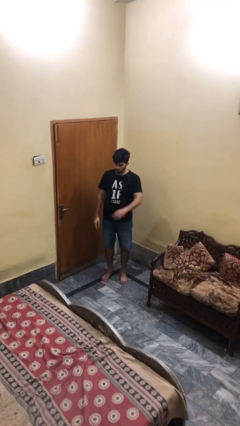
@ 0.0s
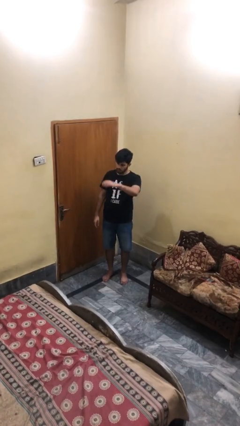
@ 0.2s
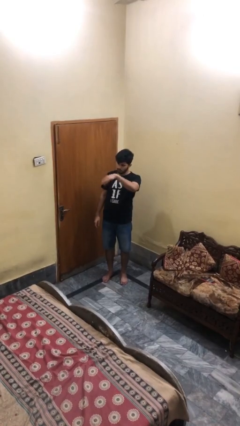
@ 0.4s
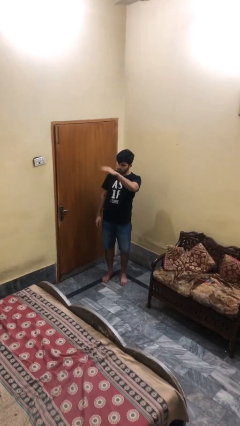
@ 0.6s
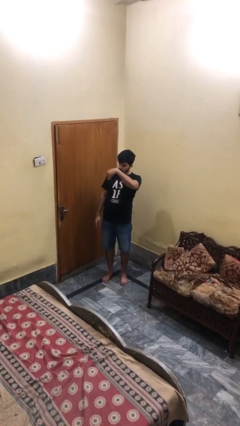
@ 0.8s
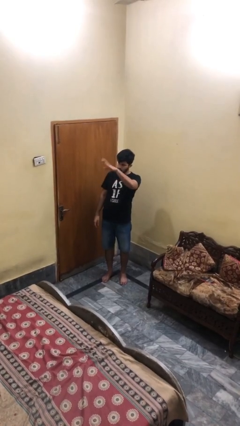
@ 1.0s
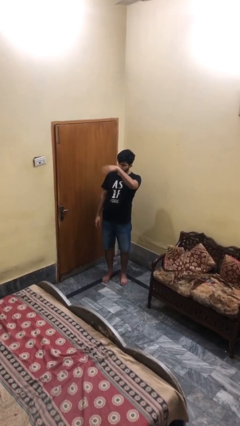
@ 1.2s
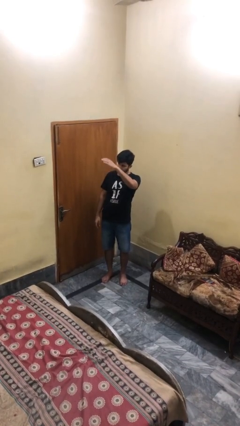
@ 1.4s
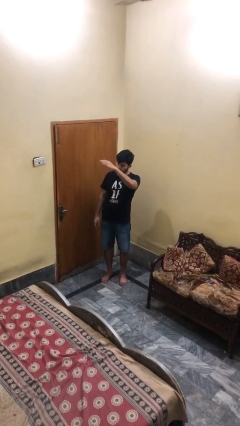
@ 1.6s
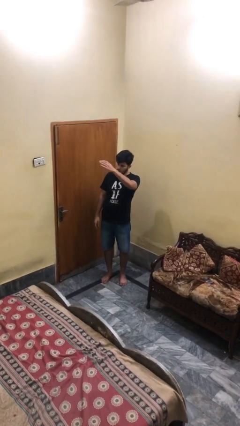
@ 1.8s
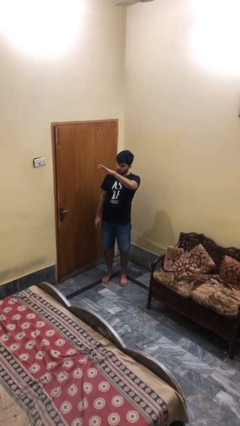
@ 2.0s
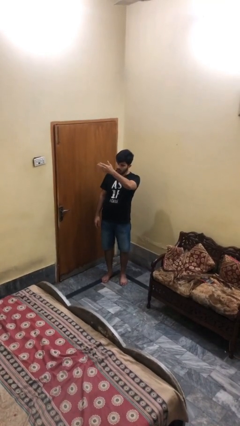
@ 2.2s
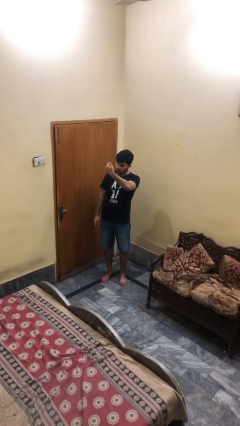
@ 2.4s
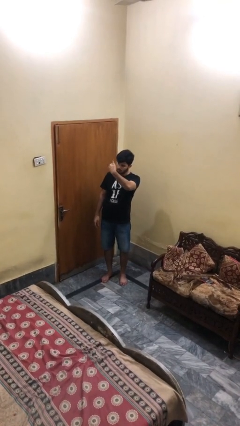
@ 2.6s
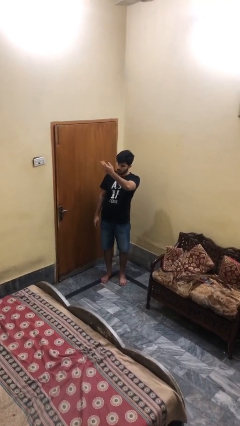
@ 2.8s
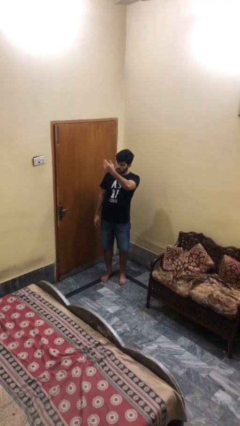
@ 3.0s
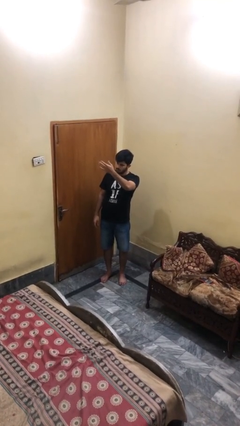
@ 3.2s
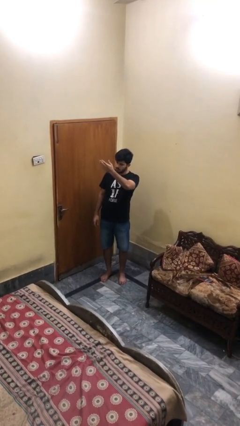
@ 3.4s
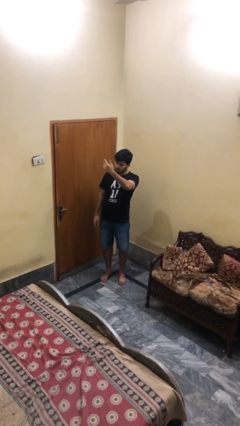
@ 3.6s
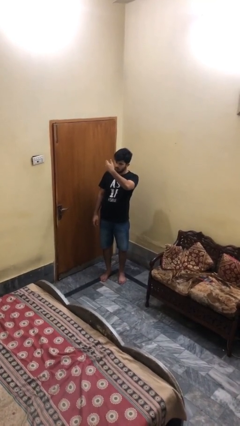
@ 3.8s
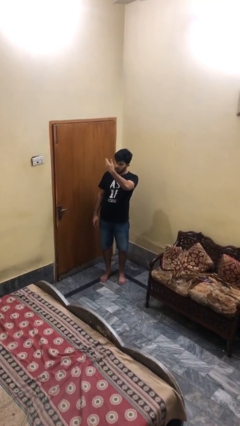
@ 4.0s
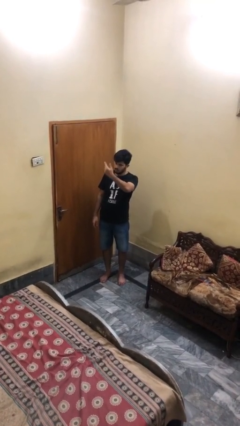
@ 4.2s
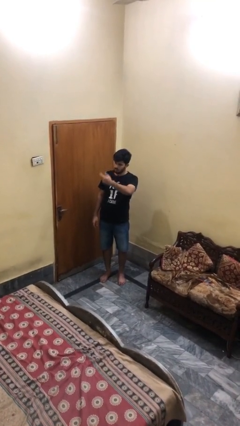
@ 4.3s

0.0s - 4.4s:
person gestures come here

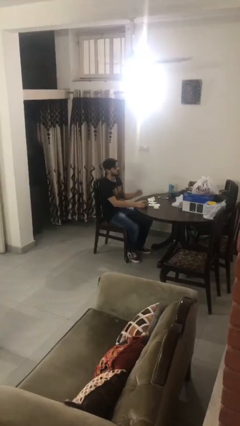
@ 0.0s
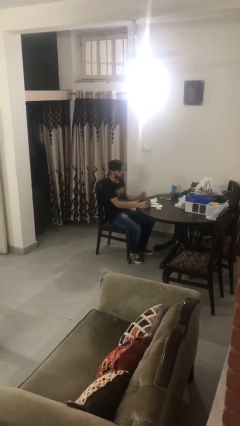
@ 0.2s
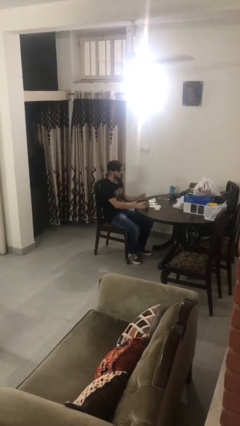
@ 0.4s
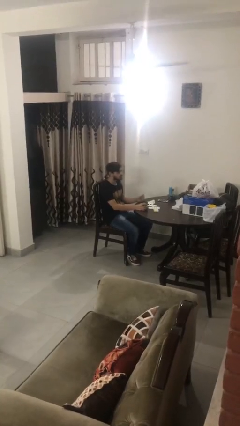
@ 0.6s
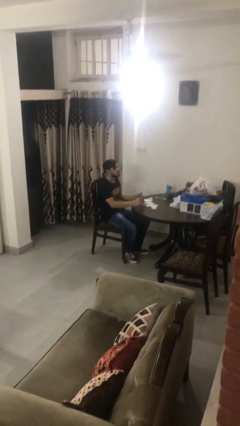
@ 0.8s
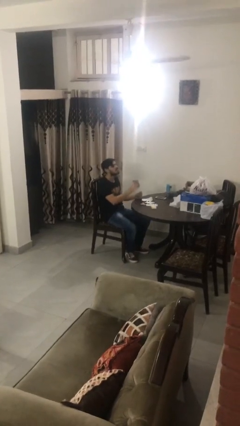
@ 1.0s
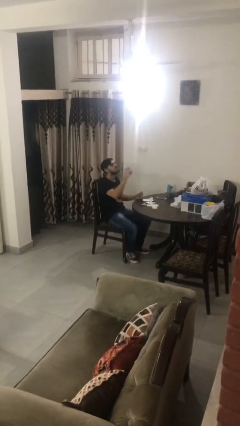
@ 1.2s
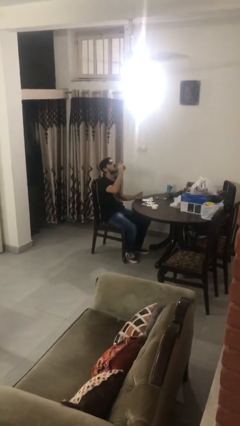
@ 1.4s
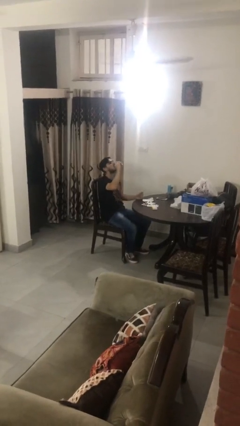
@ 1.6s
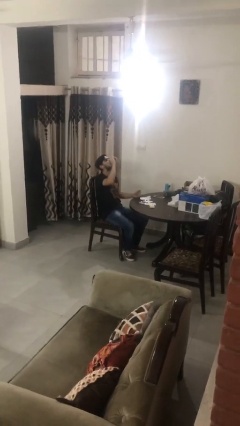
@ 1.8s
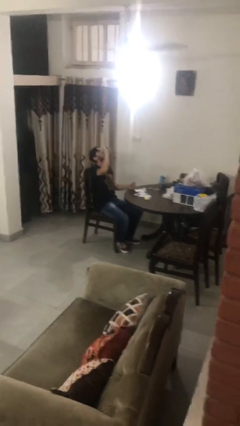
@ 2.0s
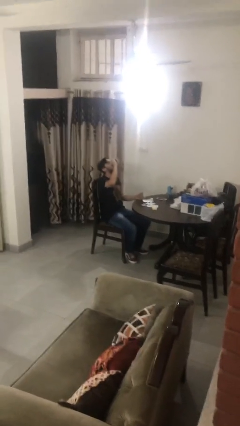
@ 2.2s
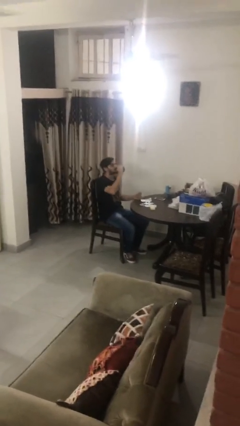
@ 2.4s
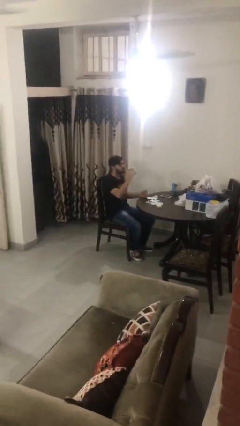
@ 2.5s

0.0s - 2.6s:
person drinks from cup

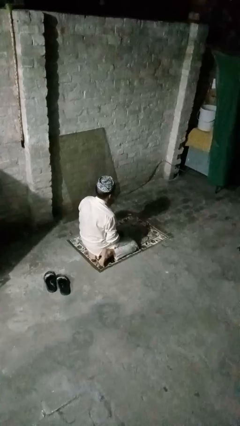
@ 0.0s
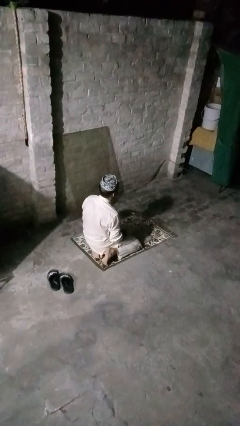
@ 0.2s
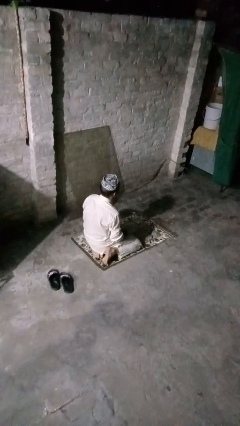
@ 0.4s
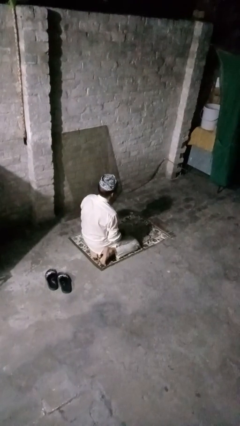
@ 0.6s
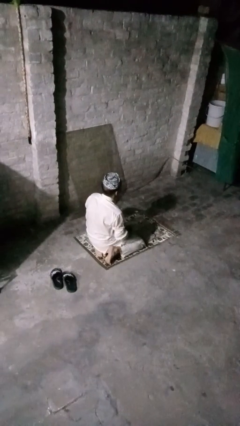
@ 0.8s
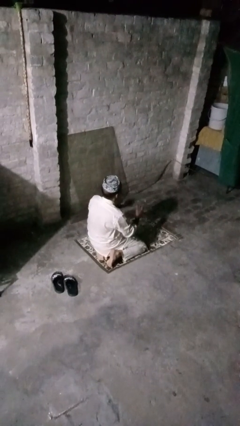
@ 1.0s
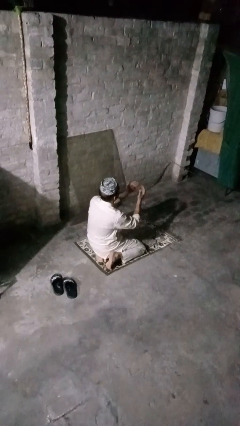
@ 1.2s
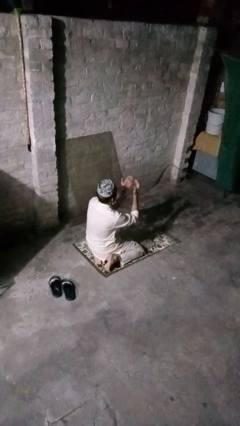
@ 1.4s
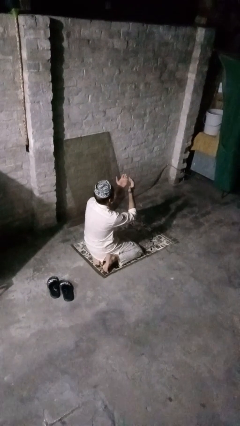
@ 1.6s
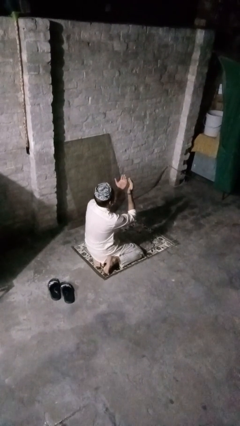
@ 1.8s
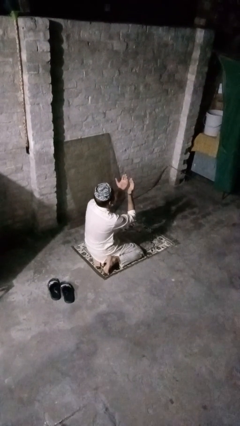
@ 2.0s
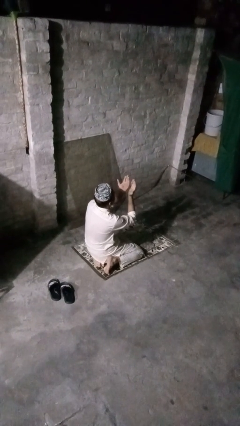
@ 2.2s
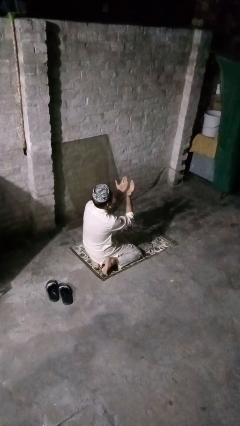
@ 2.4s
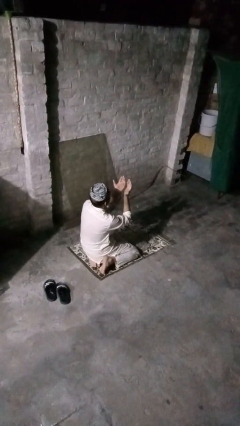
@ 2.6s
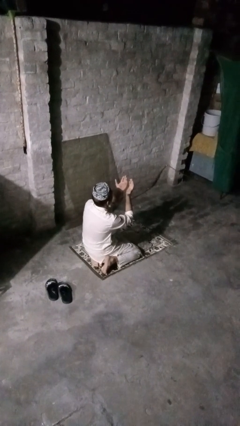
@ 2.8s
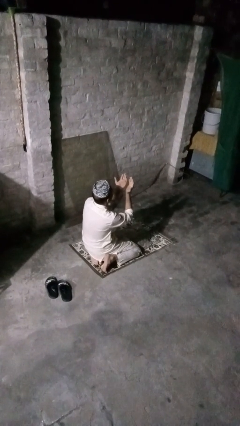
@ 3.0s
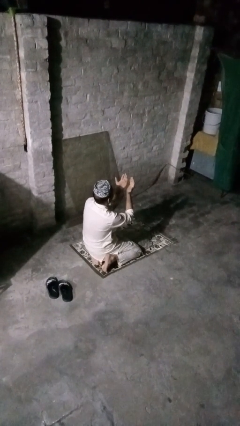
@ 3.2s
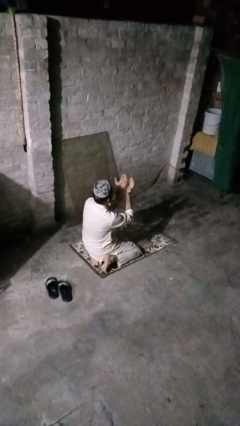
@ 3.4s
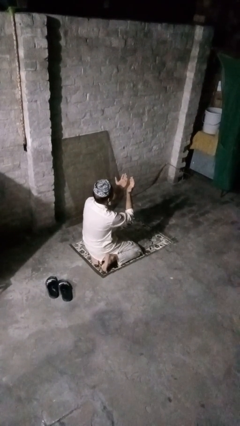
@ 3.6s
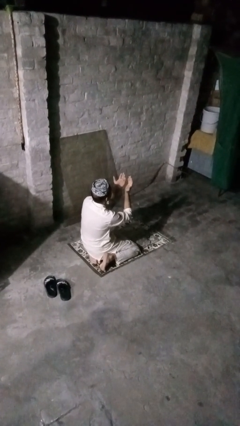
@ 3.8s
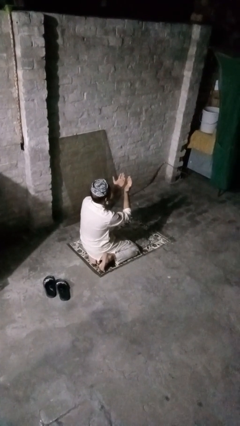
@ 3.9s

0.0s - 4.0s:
person prays

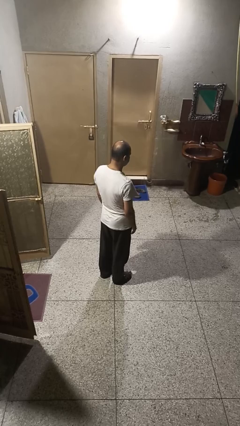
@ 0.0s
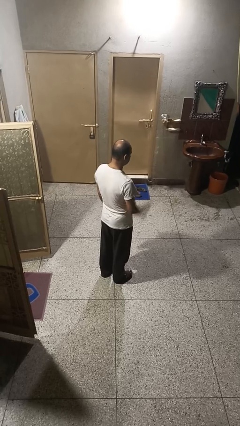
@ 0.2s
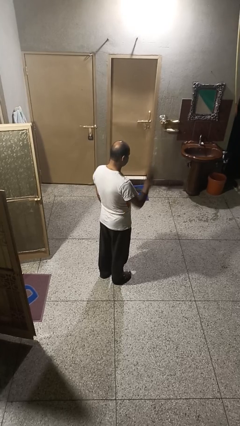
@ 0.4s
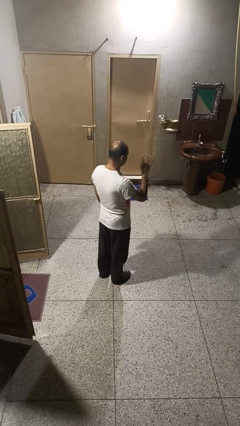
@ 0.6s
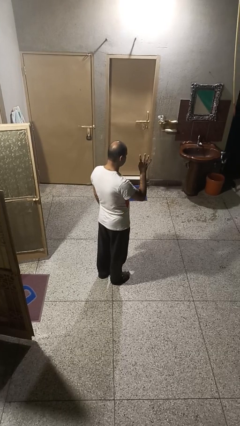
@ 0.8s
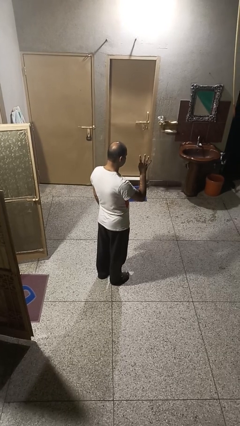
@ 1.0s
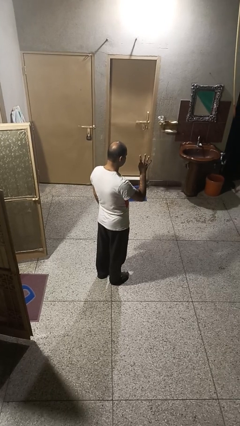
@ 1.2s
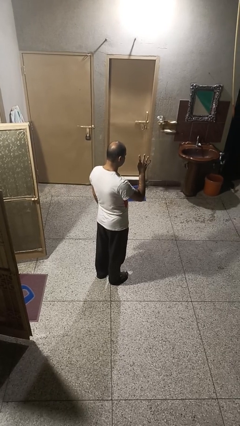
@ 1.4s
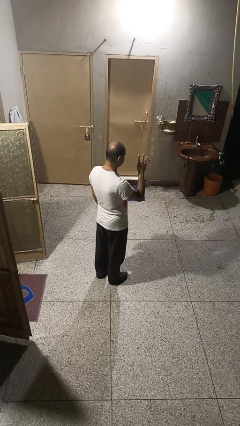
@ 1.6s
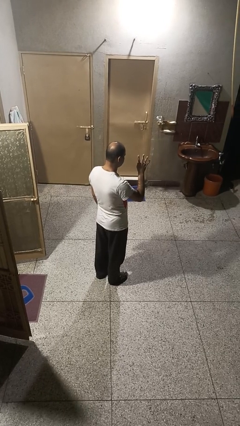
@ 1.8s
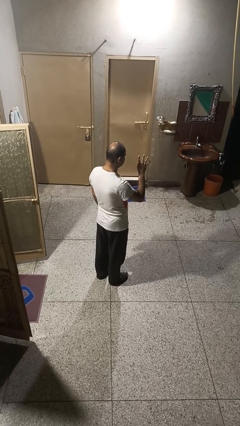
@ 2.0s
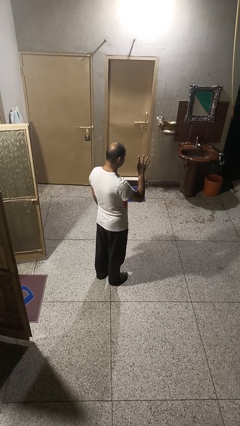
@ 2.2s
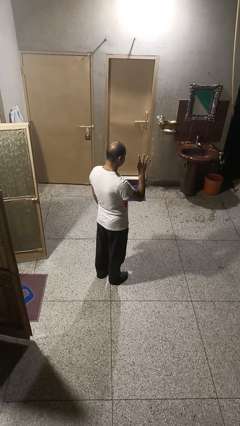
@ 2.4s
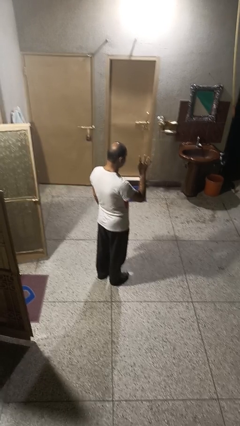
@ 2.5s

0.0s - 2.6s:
person gestures number four

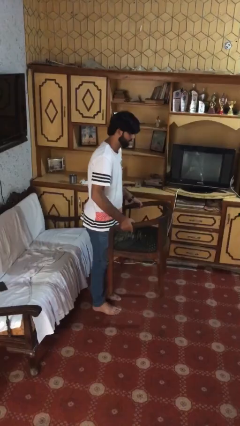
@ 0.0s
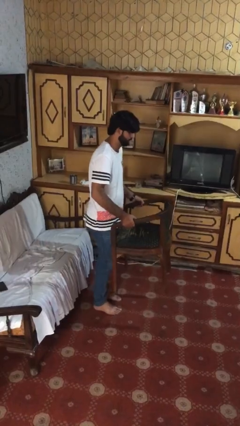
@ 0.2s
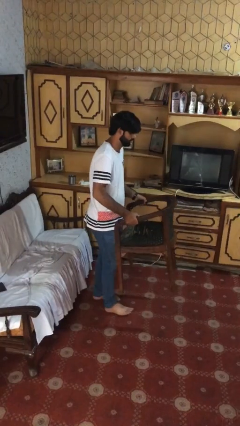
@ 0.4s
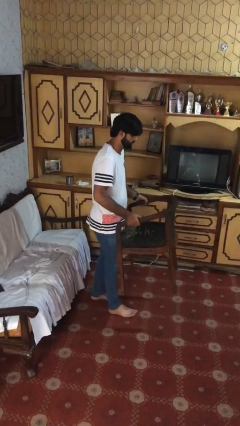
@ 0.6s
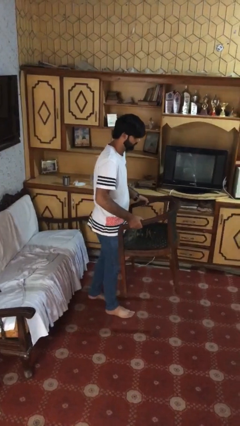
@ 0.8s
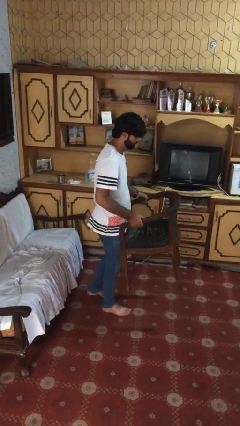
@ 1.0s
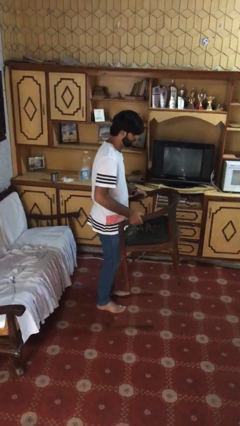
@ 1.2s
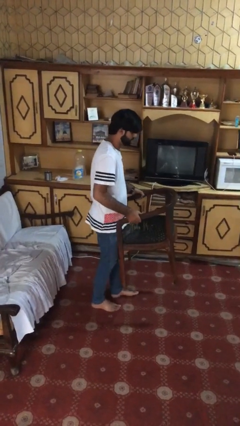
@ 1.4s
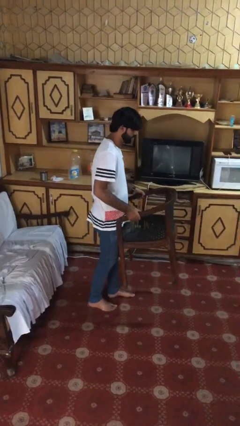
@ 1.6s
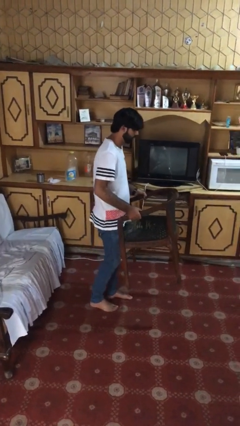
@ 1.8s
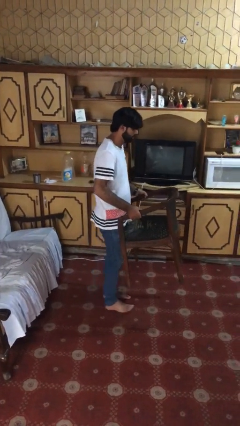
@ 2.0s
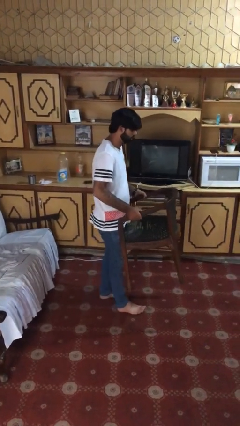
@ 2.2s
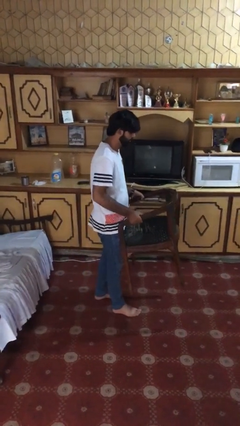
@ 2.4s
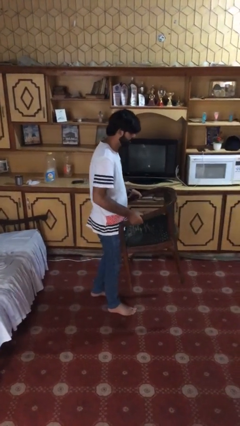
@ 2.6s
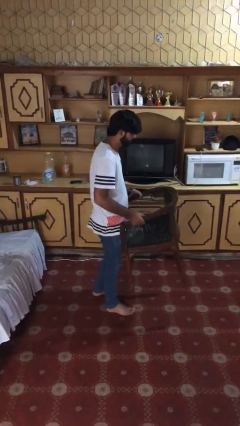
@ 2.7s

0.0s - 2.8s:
person carries heavy object

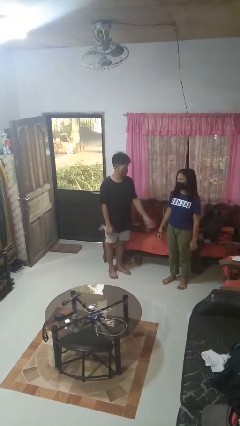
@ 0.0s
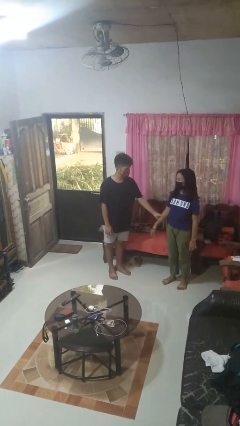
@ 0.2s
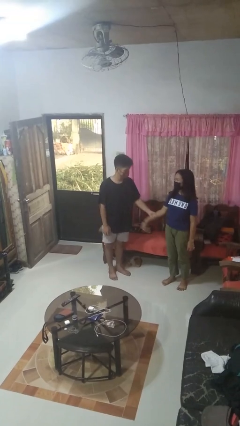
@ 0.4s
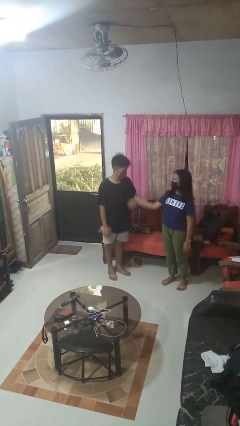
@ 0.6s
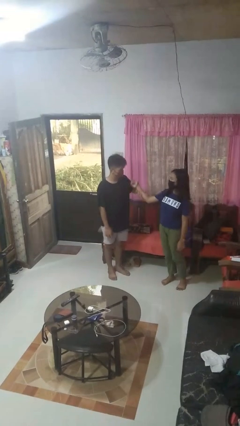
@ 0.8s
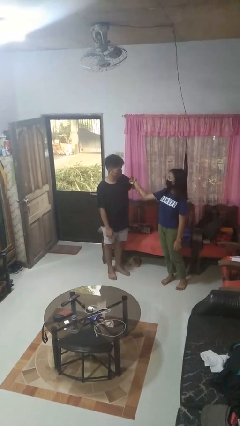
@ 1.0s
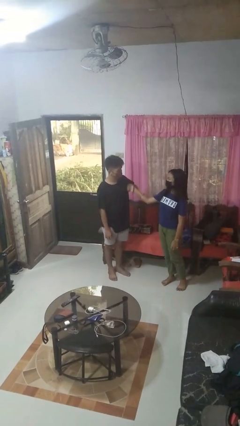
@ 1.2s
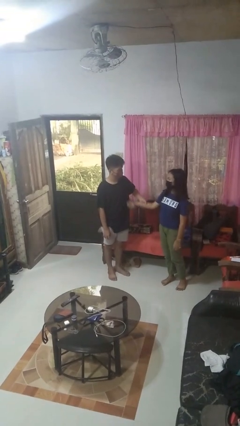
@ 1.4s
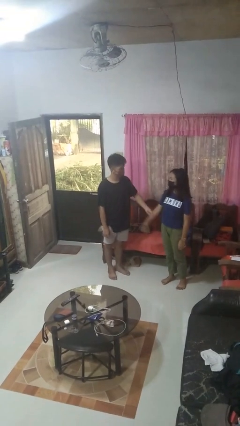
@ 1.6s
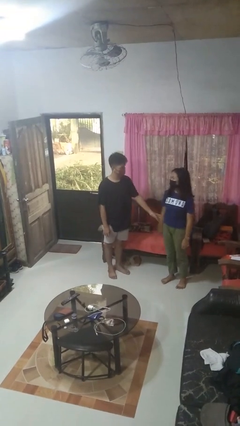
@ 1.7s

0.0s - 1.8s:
person grabs person by forearm
